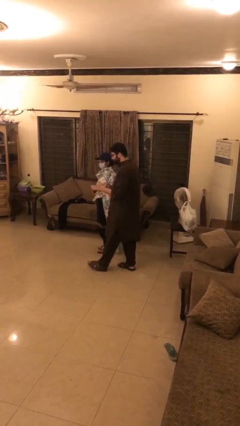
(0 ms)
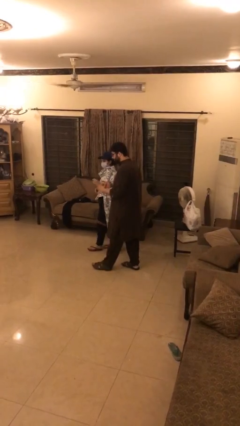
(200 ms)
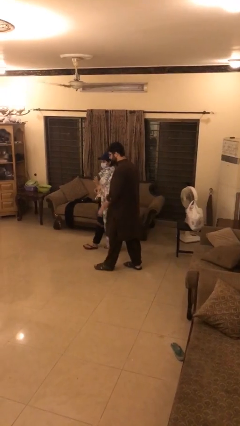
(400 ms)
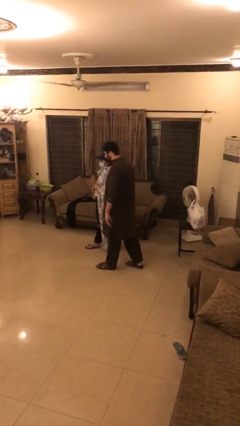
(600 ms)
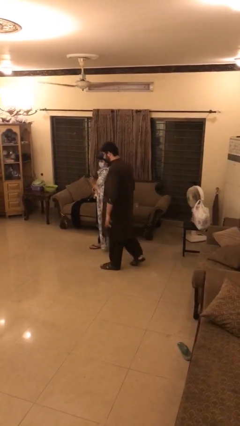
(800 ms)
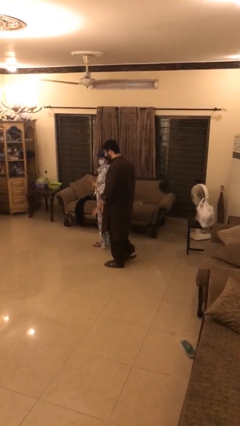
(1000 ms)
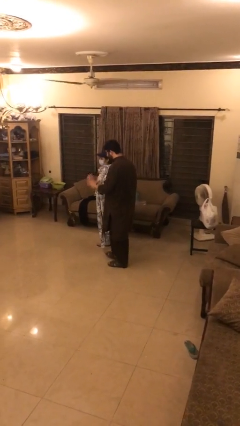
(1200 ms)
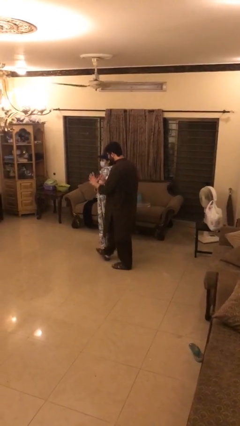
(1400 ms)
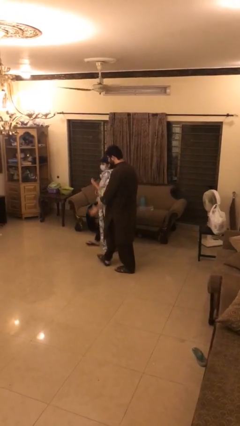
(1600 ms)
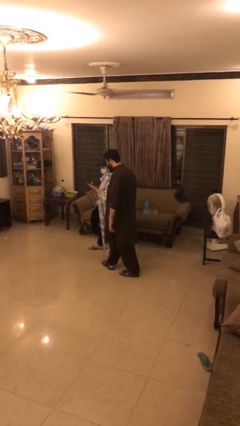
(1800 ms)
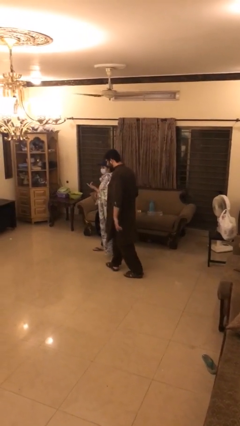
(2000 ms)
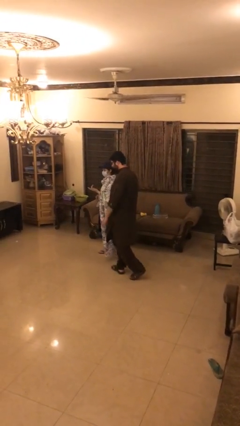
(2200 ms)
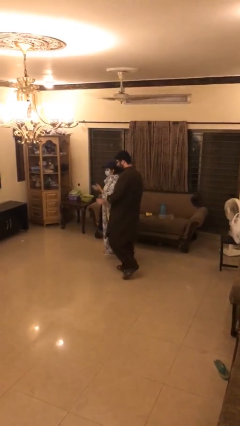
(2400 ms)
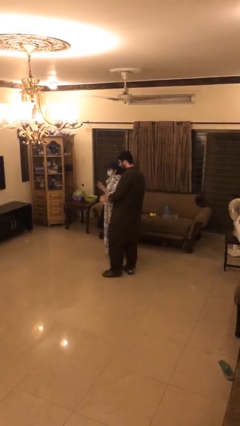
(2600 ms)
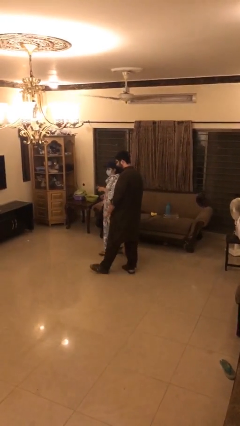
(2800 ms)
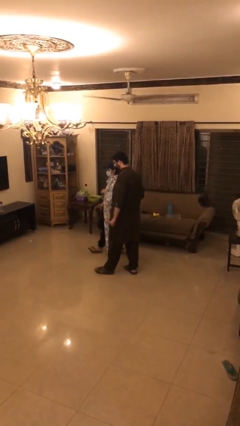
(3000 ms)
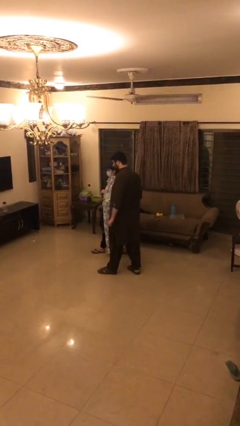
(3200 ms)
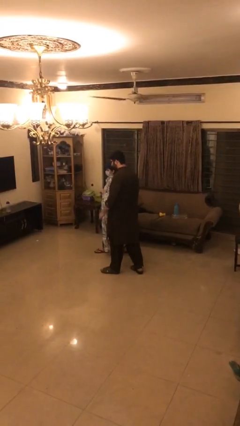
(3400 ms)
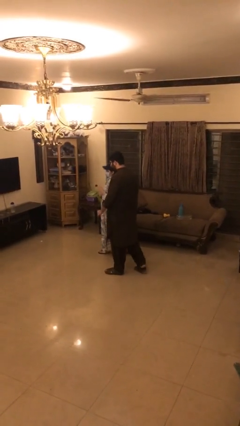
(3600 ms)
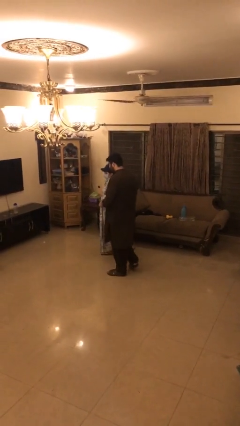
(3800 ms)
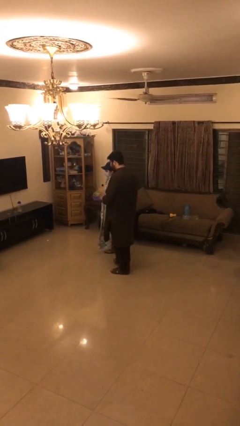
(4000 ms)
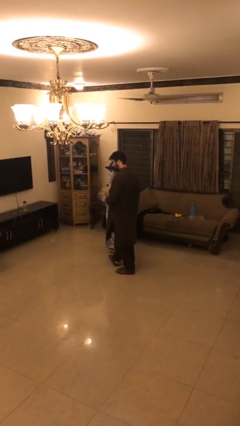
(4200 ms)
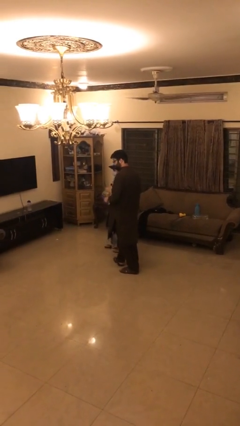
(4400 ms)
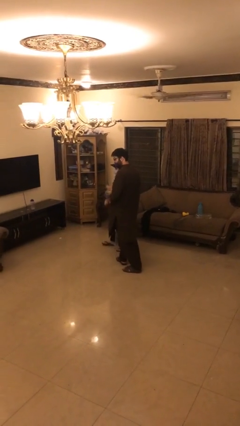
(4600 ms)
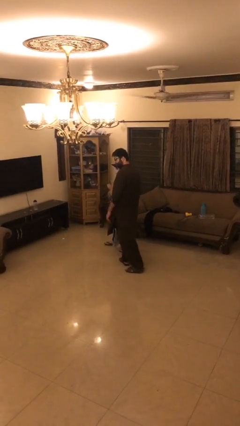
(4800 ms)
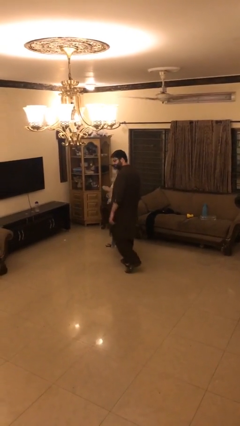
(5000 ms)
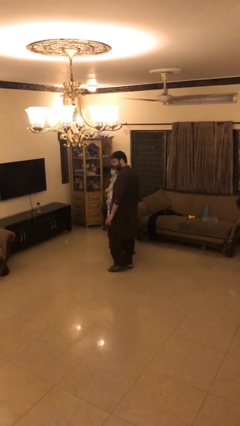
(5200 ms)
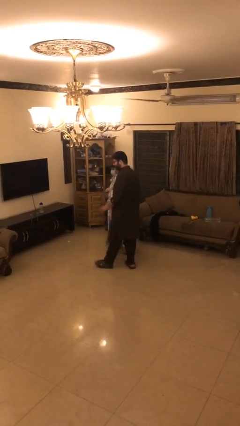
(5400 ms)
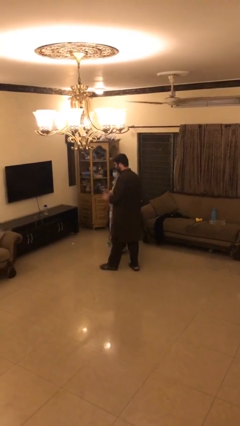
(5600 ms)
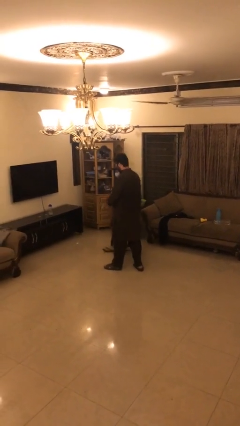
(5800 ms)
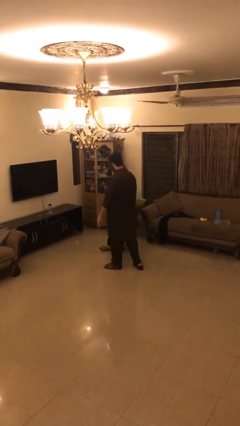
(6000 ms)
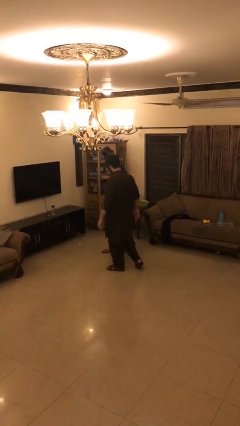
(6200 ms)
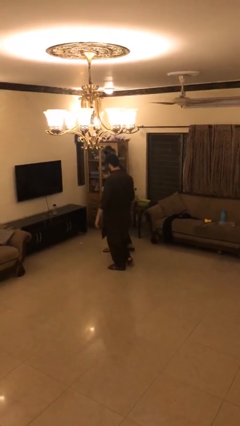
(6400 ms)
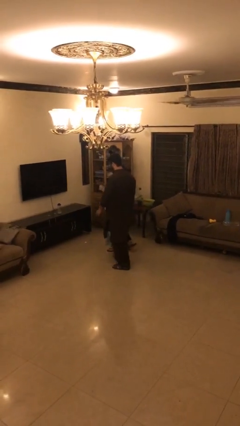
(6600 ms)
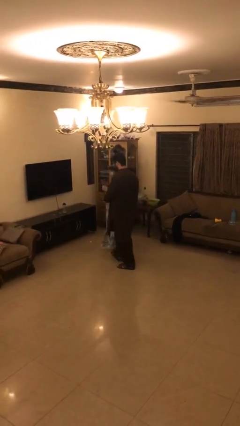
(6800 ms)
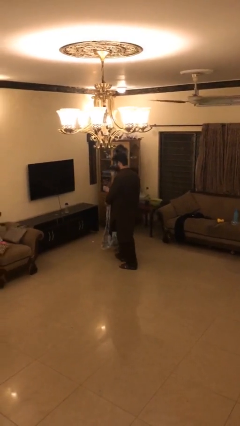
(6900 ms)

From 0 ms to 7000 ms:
person talks to person

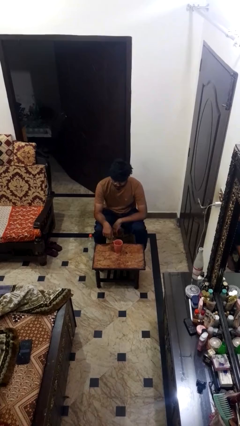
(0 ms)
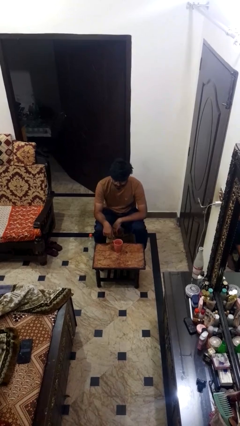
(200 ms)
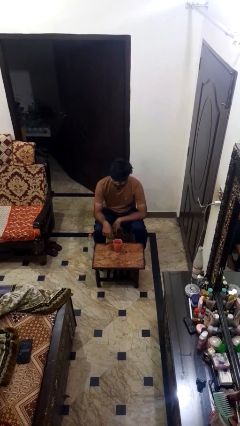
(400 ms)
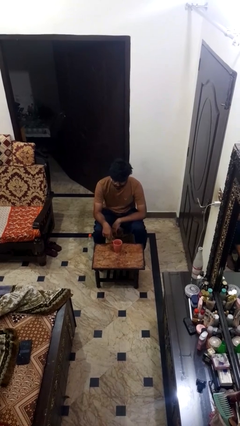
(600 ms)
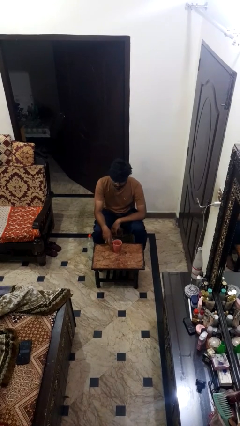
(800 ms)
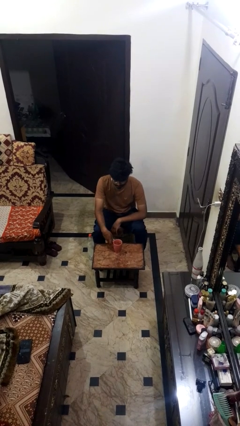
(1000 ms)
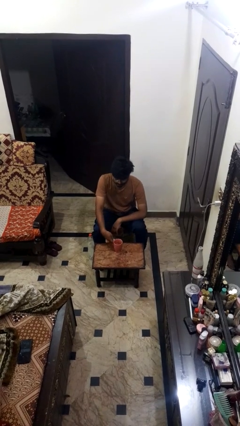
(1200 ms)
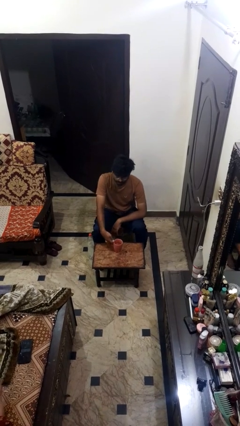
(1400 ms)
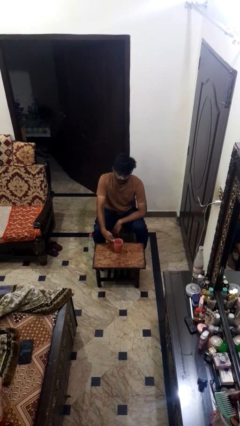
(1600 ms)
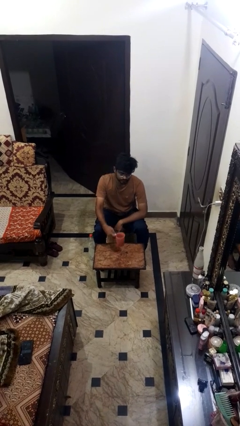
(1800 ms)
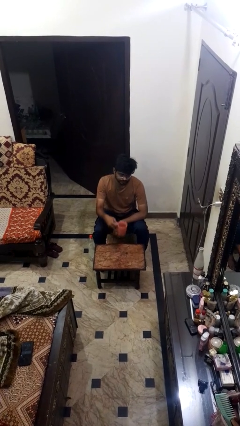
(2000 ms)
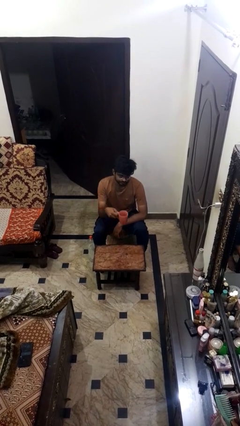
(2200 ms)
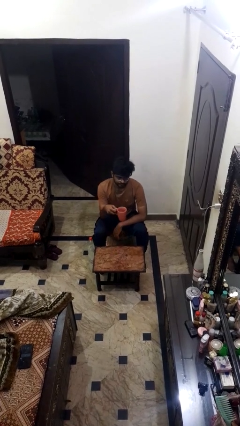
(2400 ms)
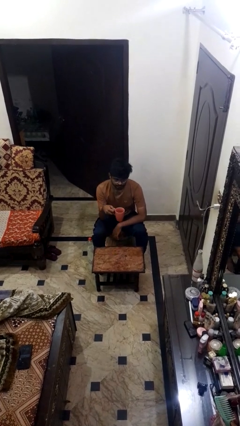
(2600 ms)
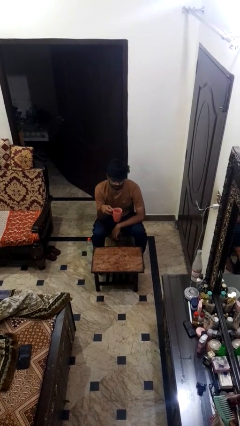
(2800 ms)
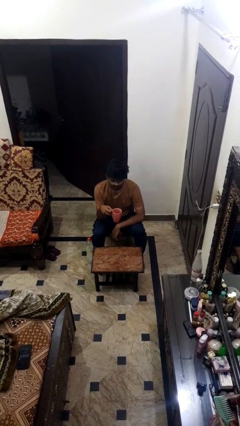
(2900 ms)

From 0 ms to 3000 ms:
person picks up object from table

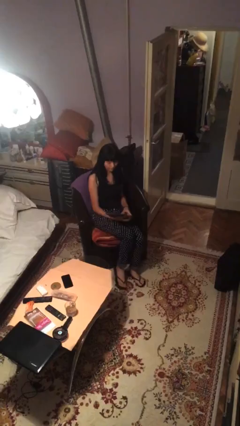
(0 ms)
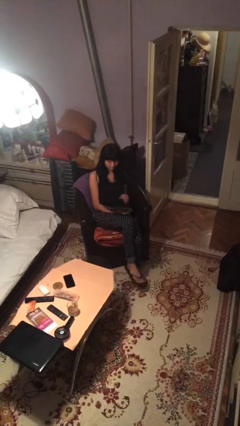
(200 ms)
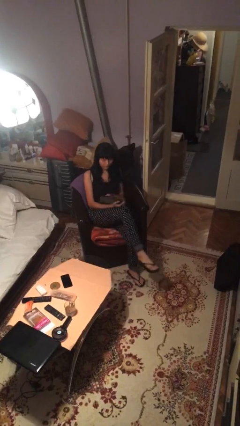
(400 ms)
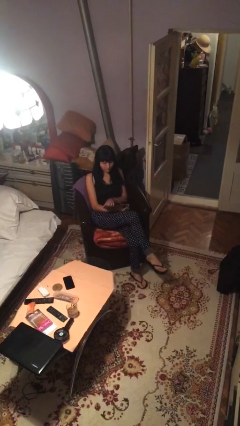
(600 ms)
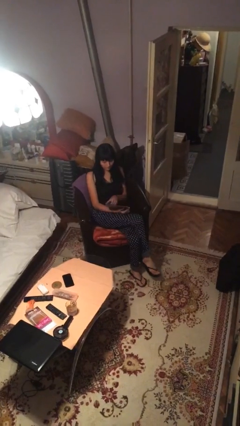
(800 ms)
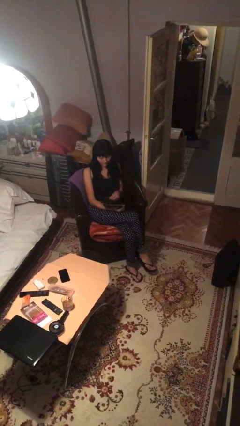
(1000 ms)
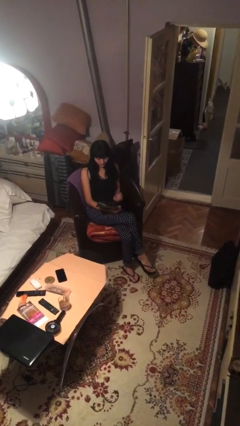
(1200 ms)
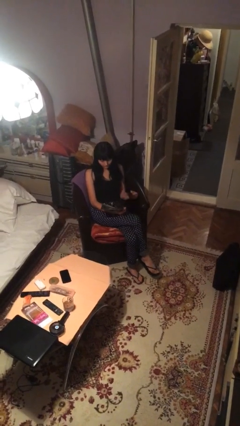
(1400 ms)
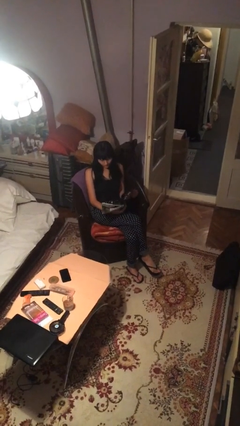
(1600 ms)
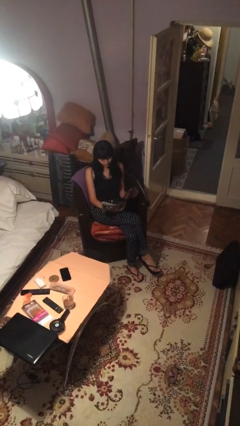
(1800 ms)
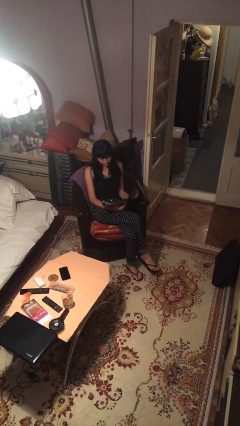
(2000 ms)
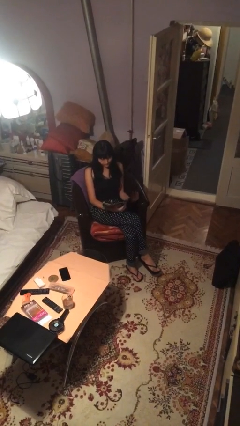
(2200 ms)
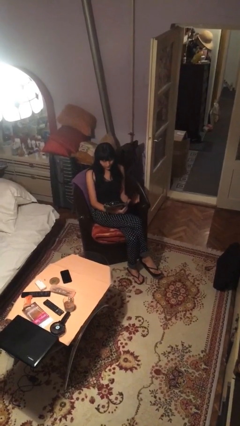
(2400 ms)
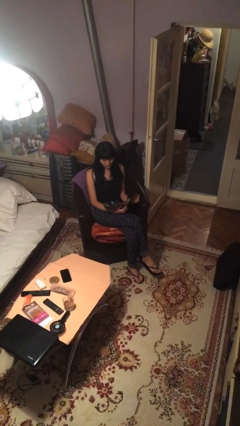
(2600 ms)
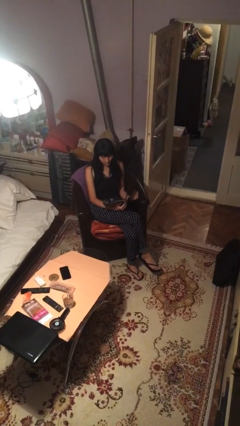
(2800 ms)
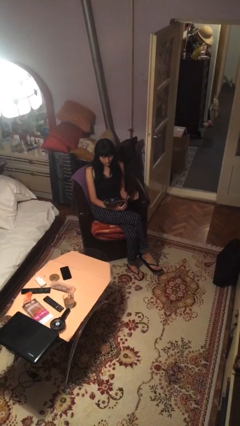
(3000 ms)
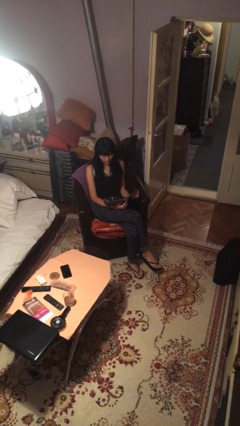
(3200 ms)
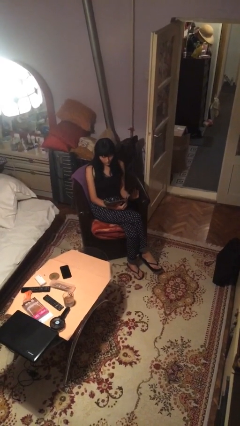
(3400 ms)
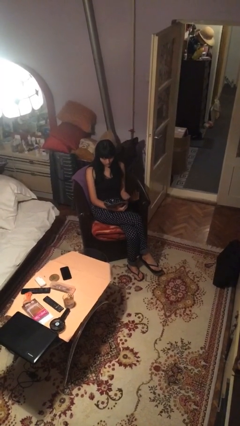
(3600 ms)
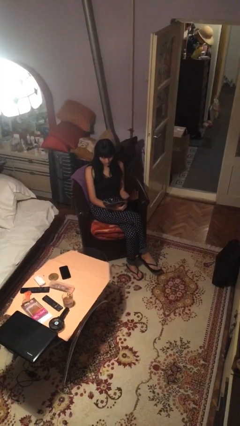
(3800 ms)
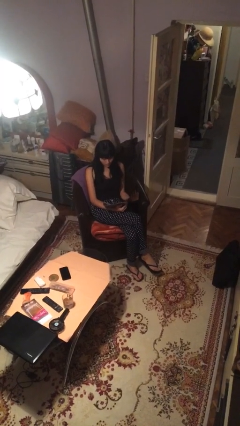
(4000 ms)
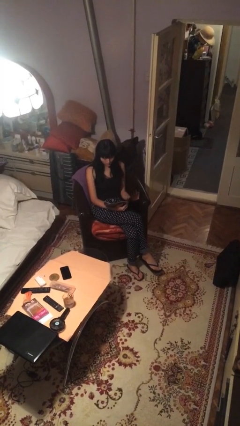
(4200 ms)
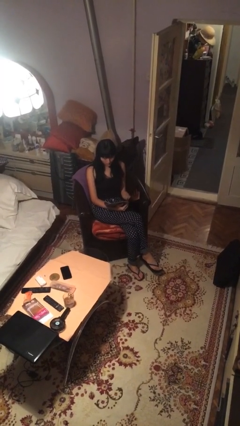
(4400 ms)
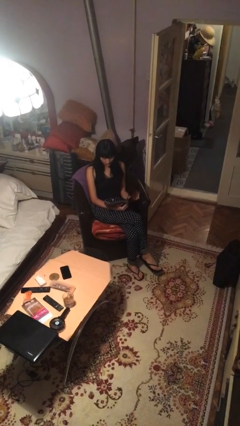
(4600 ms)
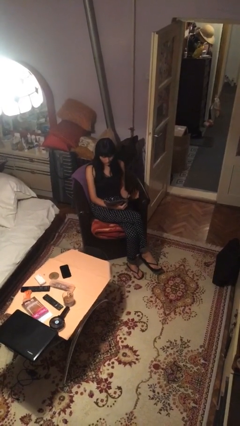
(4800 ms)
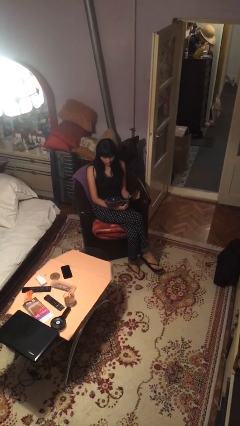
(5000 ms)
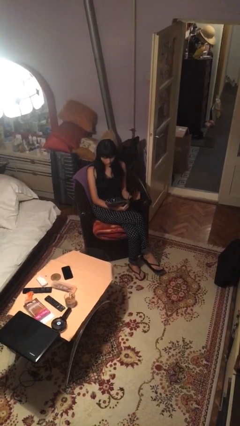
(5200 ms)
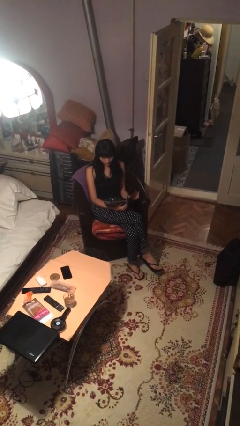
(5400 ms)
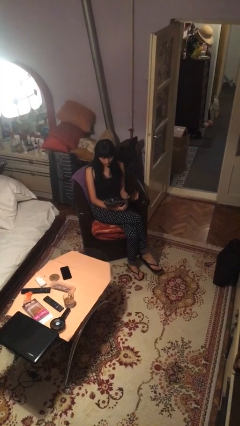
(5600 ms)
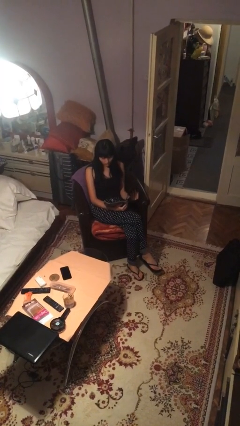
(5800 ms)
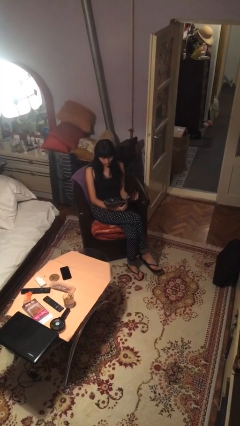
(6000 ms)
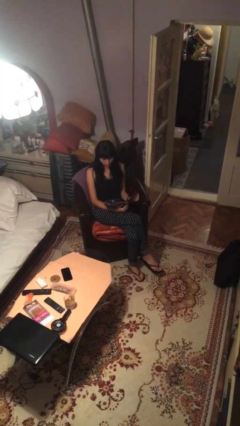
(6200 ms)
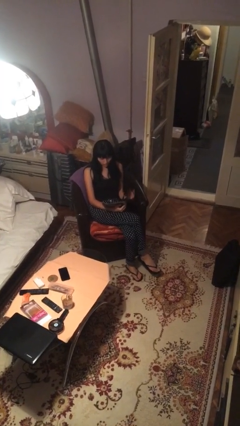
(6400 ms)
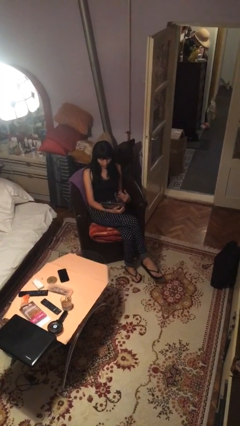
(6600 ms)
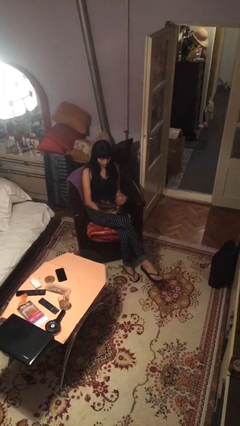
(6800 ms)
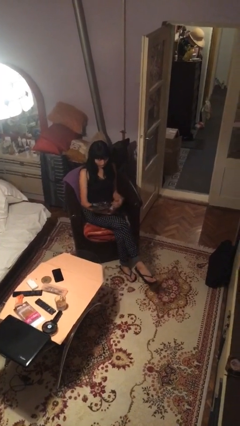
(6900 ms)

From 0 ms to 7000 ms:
person reads document

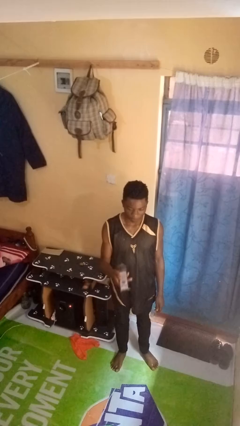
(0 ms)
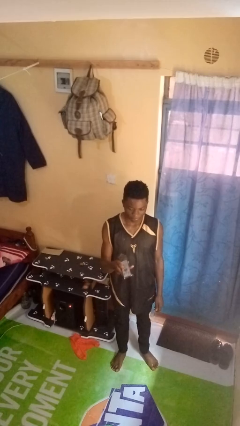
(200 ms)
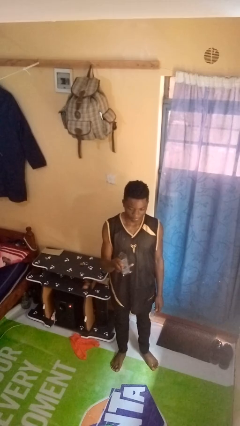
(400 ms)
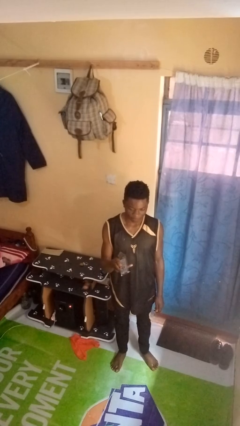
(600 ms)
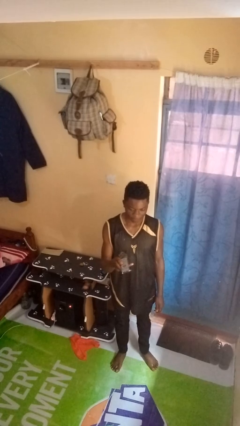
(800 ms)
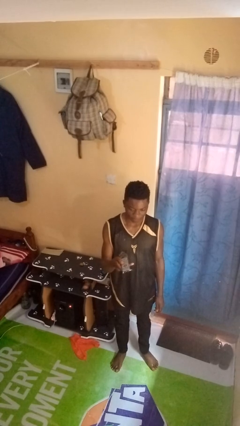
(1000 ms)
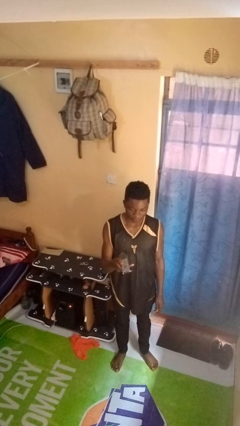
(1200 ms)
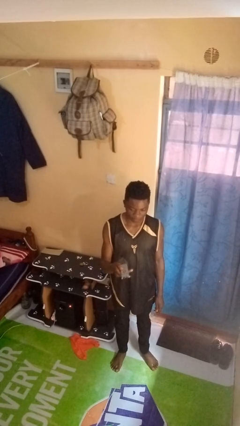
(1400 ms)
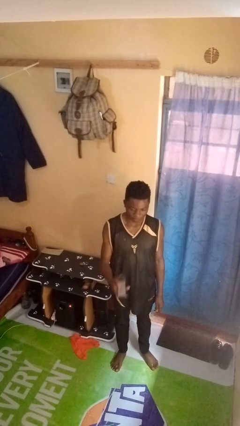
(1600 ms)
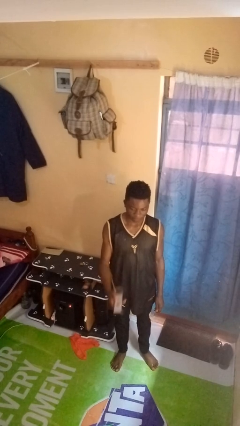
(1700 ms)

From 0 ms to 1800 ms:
person uses television remote
